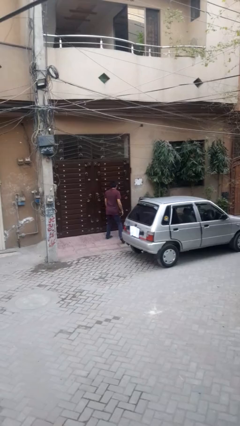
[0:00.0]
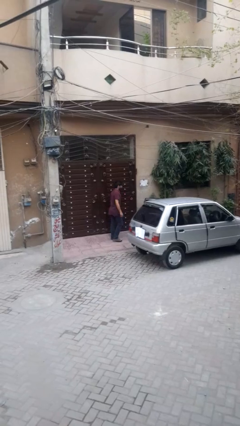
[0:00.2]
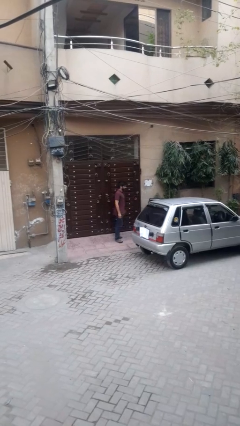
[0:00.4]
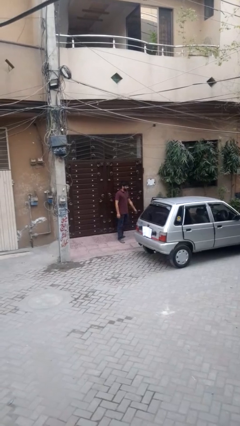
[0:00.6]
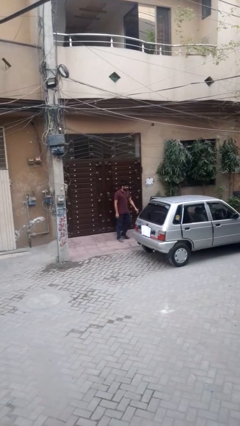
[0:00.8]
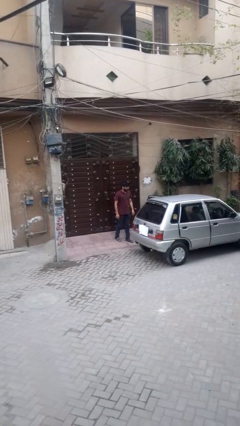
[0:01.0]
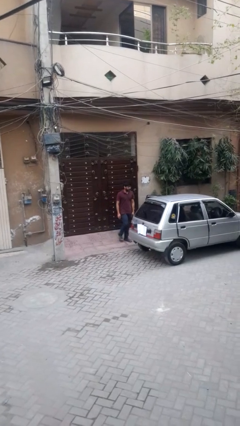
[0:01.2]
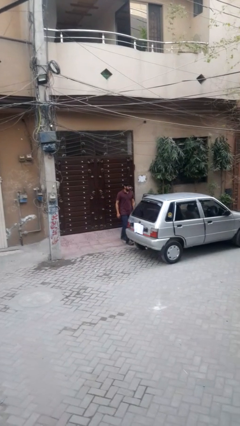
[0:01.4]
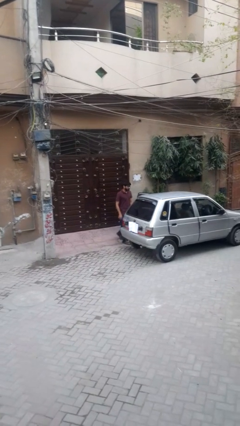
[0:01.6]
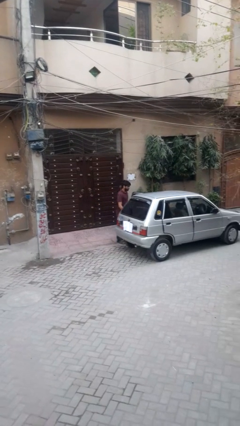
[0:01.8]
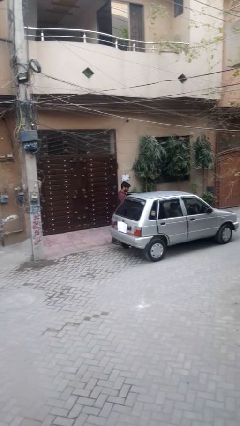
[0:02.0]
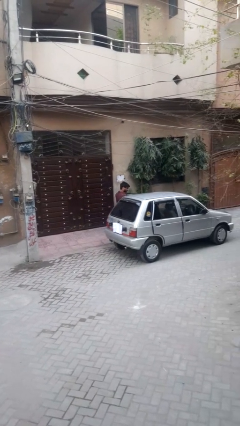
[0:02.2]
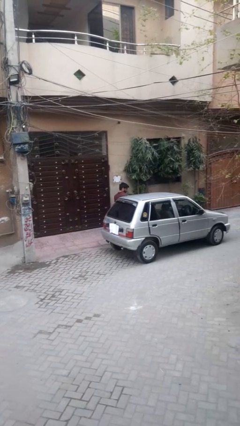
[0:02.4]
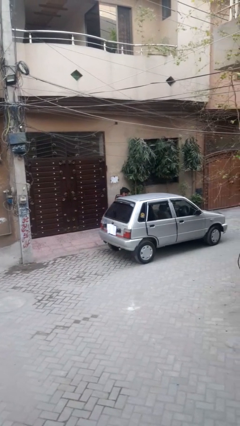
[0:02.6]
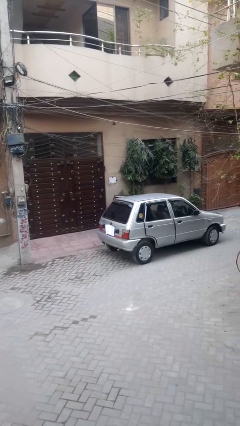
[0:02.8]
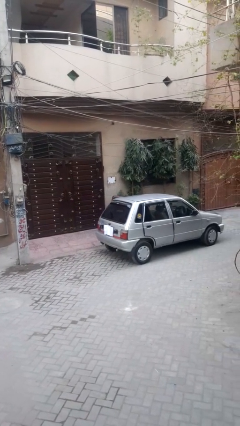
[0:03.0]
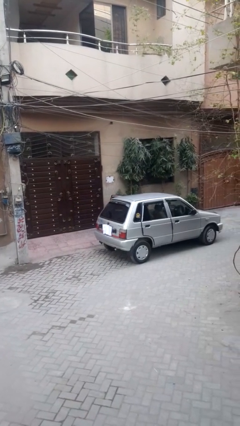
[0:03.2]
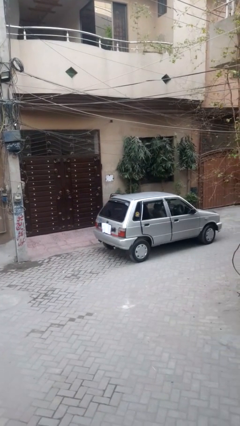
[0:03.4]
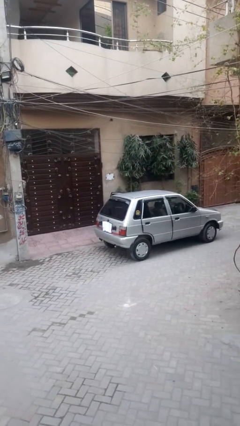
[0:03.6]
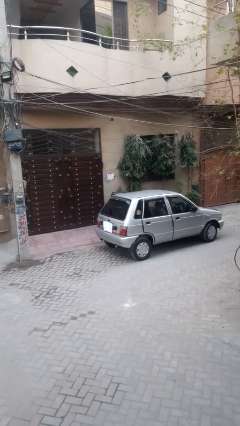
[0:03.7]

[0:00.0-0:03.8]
person enters car

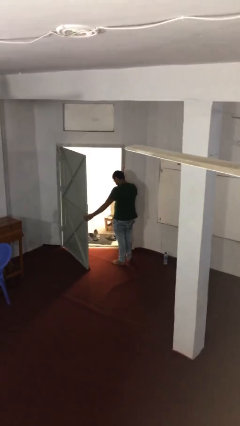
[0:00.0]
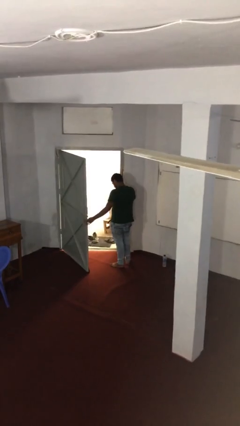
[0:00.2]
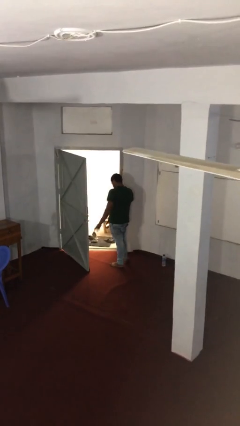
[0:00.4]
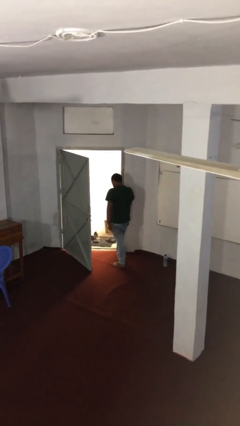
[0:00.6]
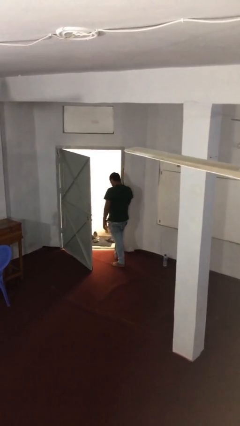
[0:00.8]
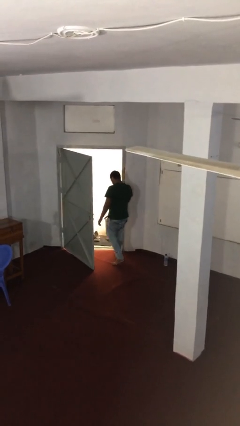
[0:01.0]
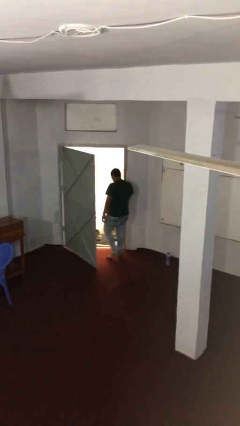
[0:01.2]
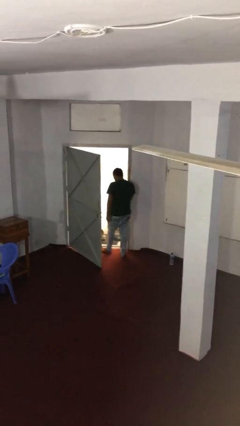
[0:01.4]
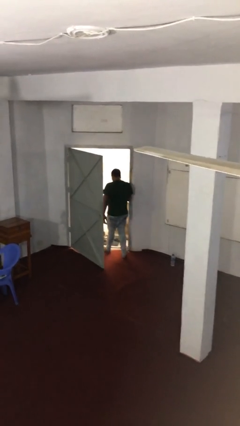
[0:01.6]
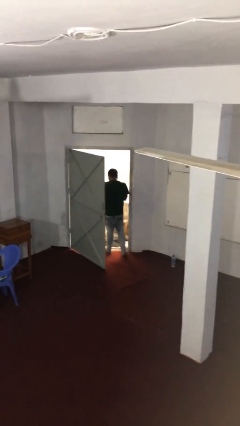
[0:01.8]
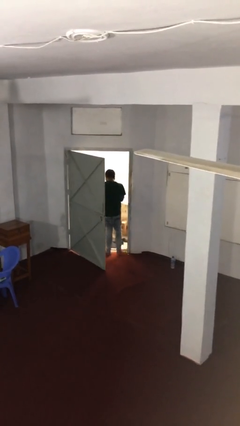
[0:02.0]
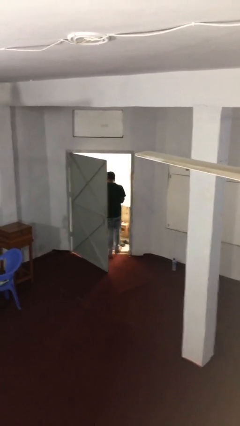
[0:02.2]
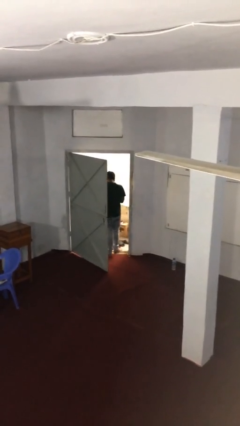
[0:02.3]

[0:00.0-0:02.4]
person exits scene through structure

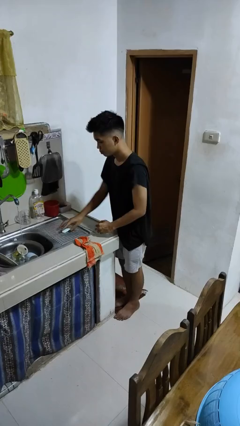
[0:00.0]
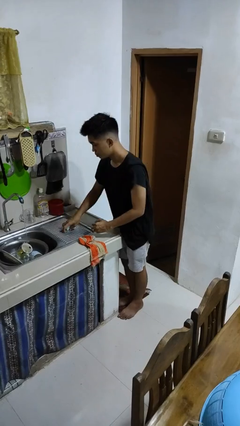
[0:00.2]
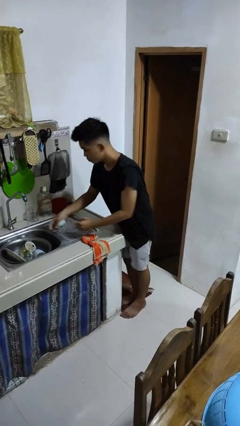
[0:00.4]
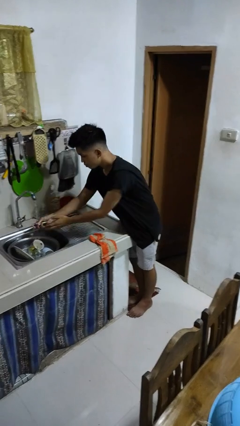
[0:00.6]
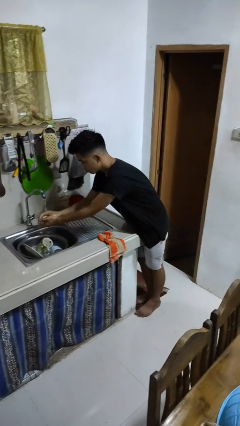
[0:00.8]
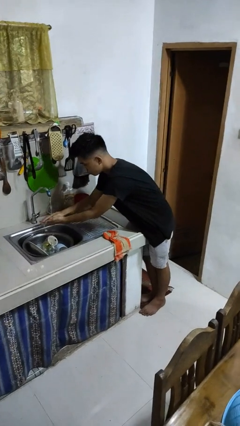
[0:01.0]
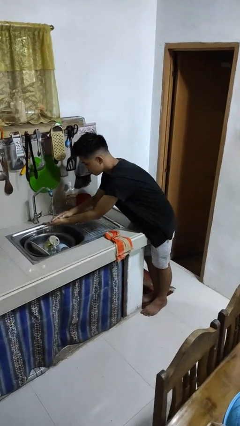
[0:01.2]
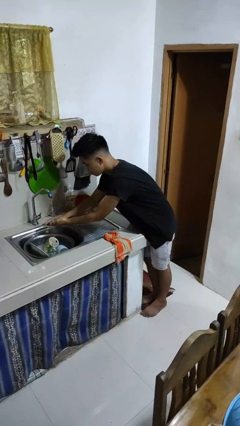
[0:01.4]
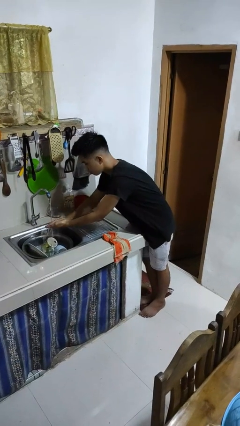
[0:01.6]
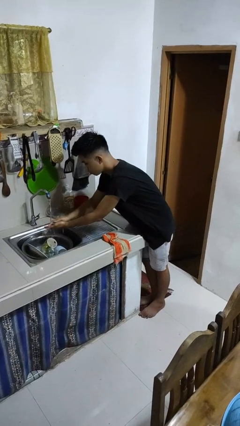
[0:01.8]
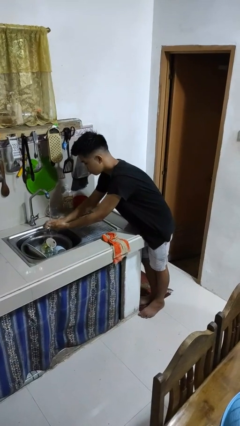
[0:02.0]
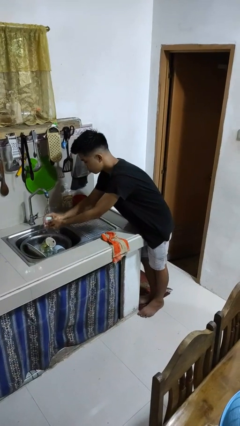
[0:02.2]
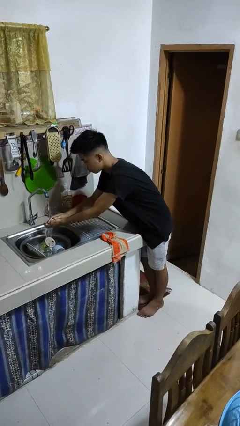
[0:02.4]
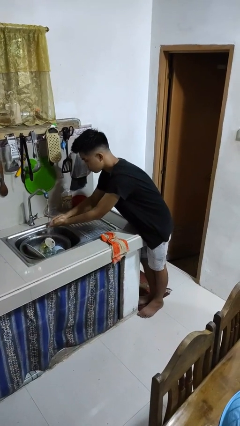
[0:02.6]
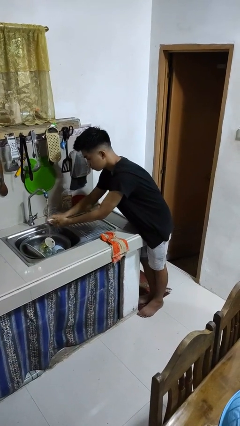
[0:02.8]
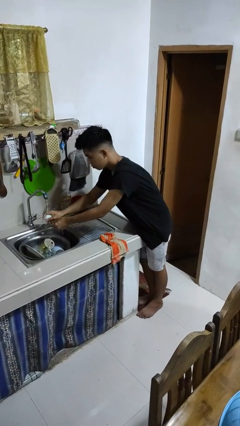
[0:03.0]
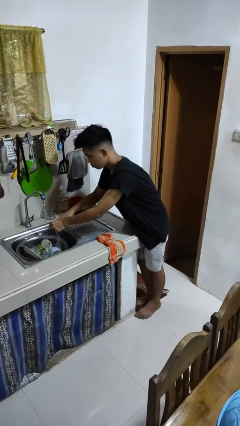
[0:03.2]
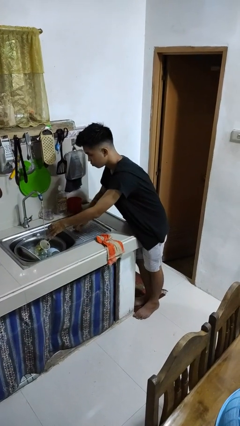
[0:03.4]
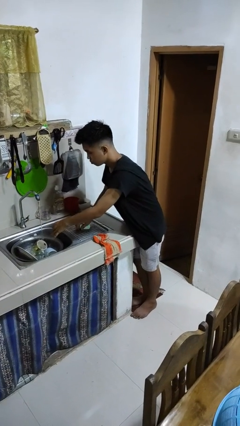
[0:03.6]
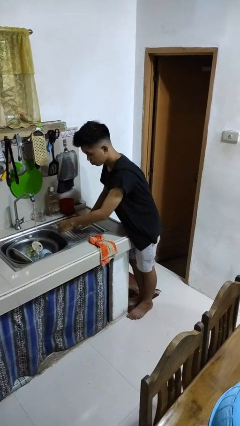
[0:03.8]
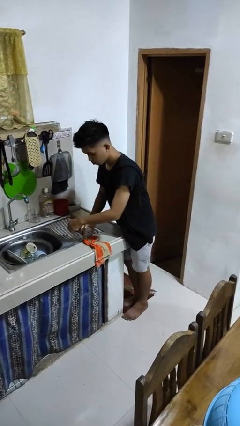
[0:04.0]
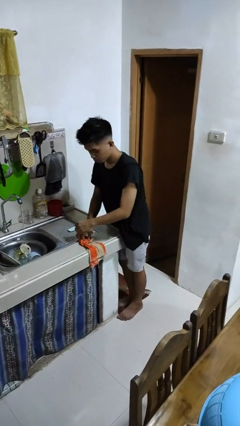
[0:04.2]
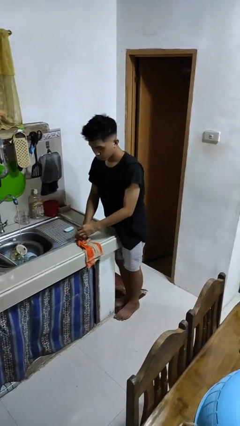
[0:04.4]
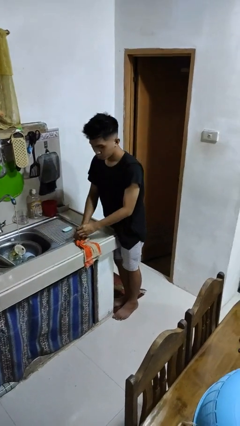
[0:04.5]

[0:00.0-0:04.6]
person washes hands

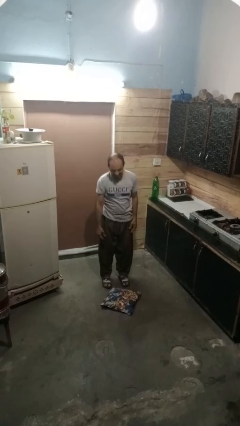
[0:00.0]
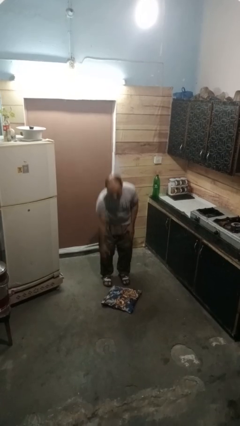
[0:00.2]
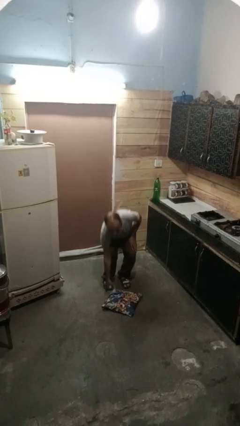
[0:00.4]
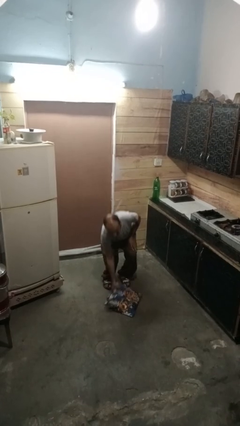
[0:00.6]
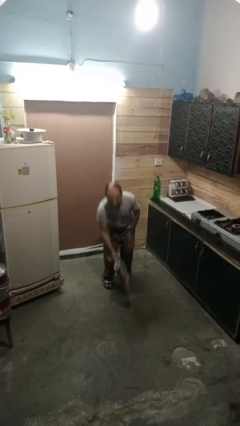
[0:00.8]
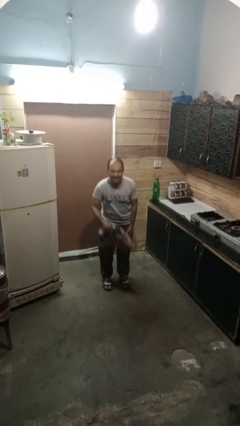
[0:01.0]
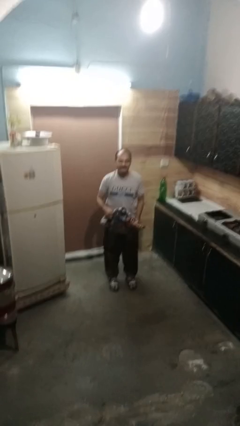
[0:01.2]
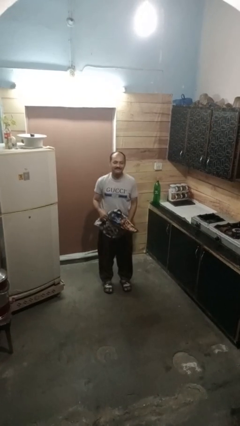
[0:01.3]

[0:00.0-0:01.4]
person picks up object from floor

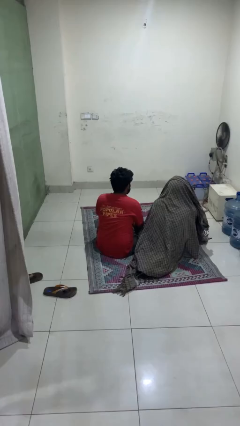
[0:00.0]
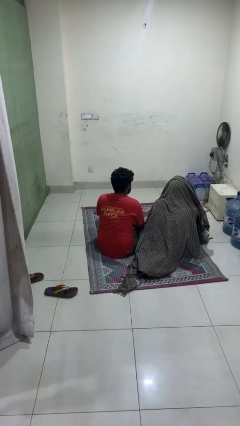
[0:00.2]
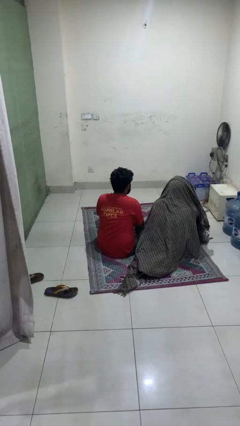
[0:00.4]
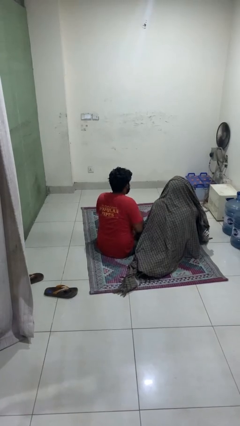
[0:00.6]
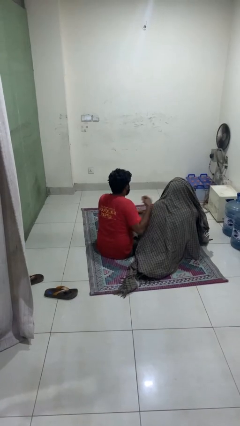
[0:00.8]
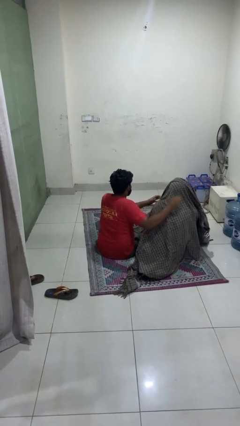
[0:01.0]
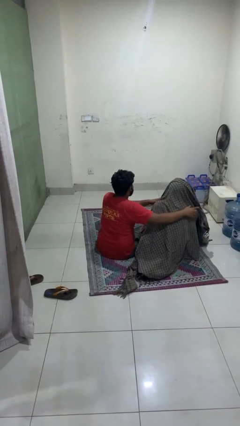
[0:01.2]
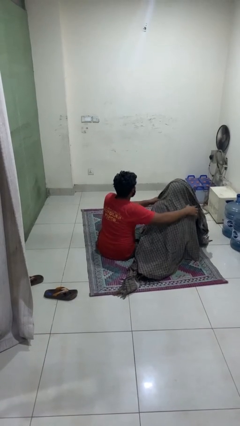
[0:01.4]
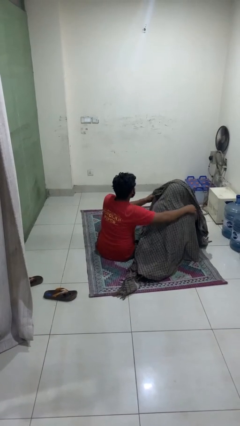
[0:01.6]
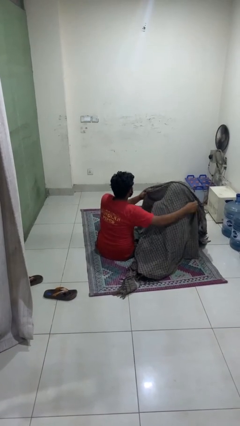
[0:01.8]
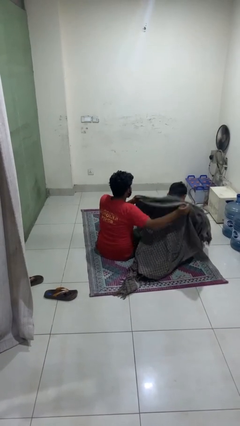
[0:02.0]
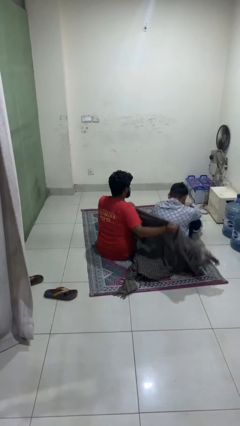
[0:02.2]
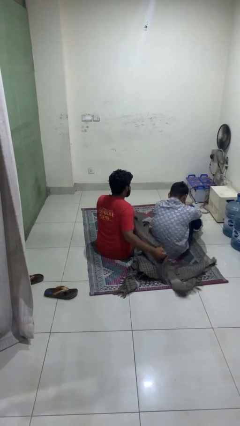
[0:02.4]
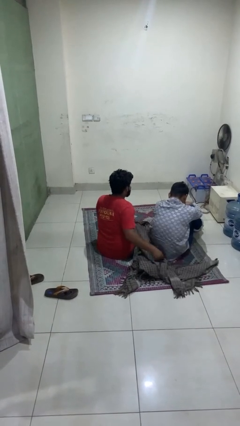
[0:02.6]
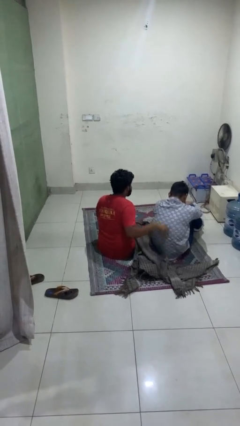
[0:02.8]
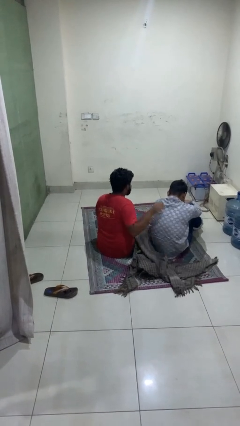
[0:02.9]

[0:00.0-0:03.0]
person uncovers friend with blanket

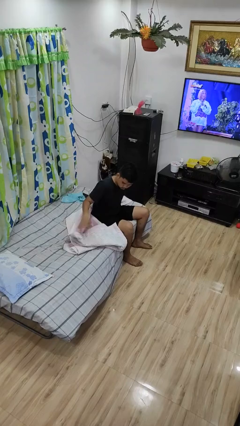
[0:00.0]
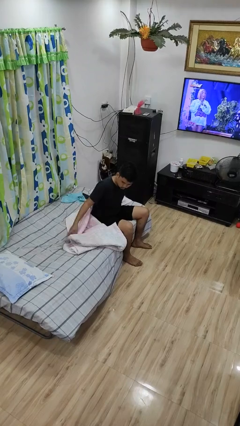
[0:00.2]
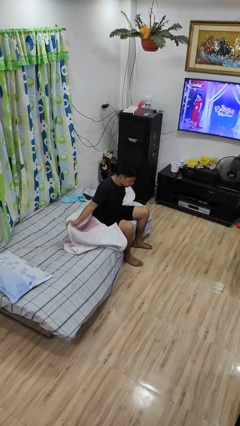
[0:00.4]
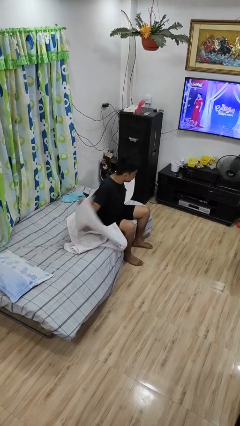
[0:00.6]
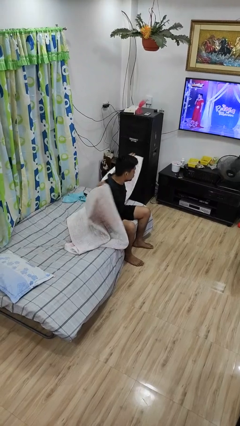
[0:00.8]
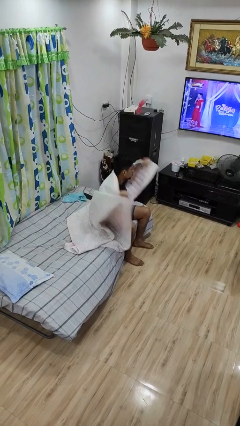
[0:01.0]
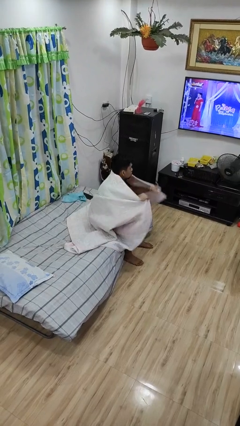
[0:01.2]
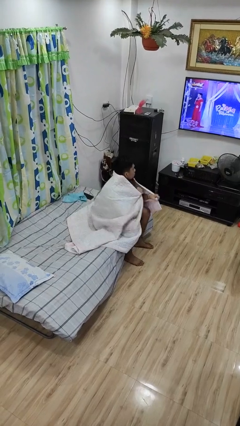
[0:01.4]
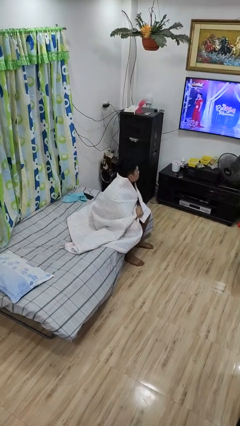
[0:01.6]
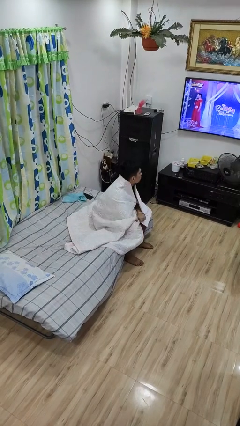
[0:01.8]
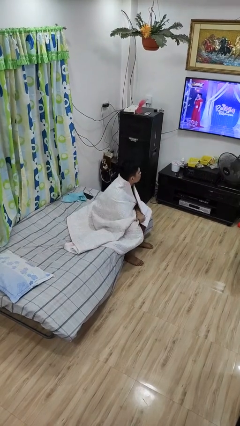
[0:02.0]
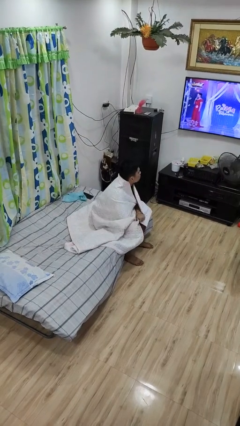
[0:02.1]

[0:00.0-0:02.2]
person covers with bedsheets

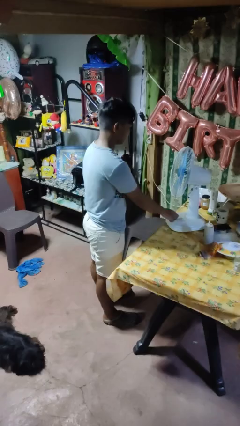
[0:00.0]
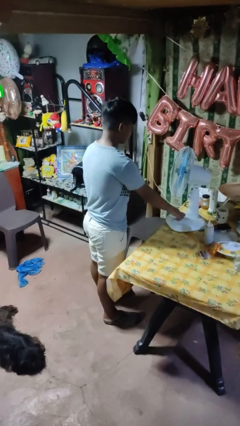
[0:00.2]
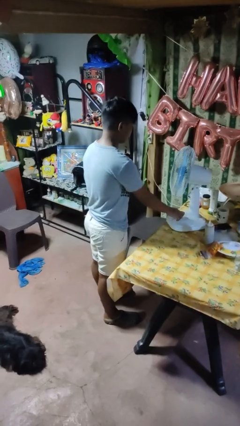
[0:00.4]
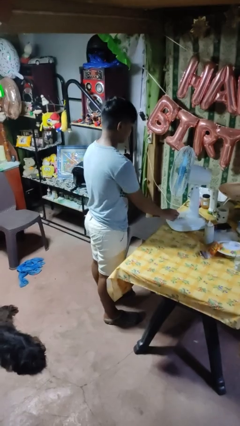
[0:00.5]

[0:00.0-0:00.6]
person turns off fan
